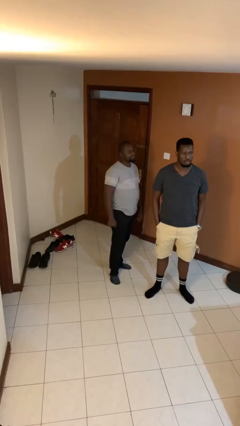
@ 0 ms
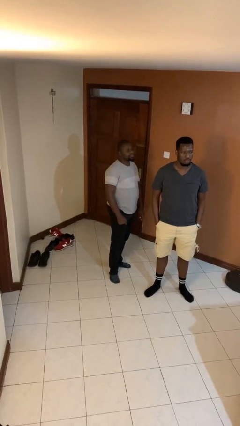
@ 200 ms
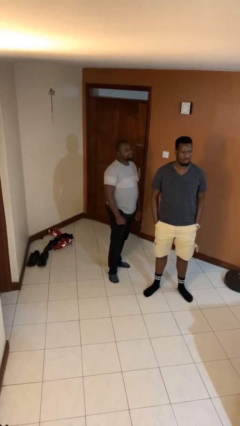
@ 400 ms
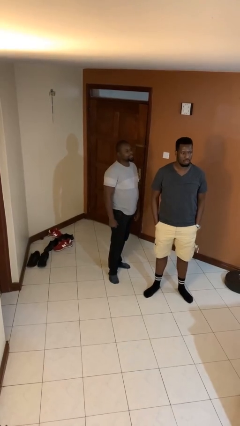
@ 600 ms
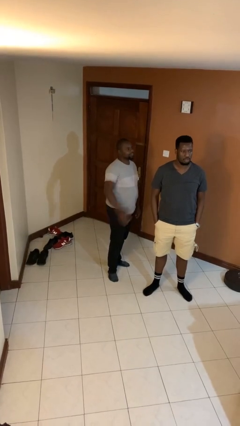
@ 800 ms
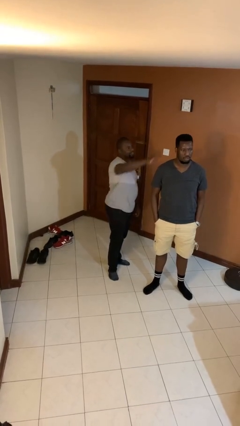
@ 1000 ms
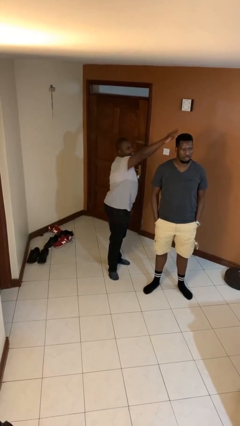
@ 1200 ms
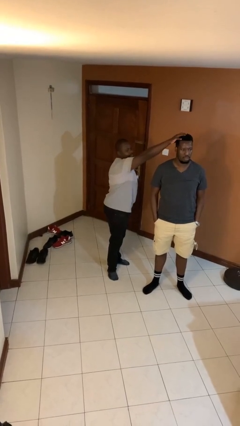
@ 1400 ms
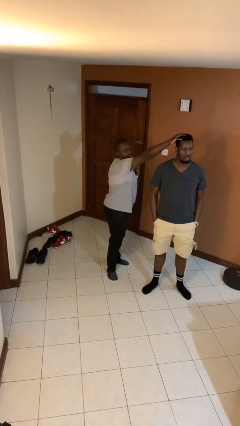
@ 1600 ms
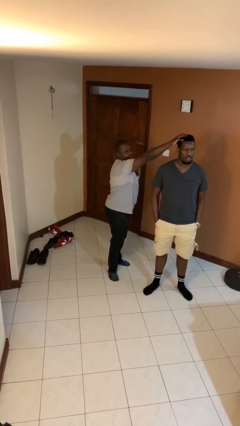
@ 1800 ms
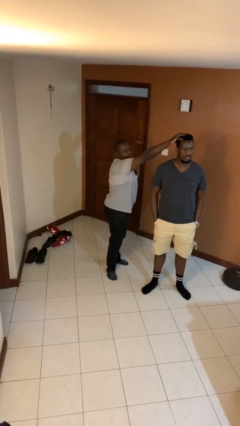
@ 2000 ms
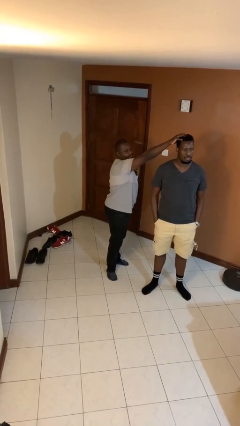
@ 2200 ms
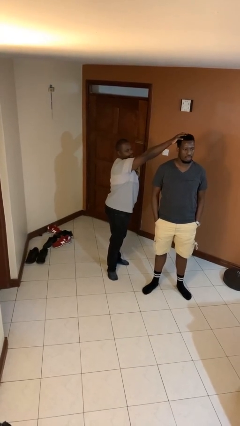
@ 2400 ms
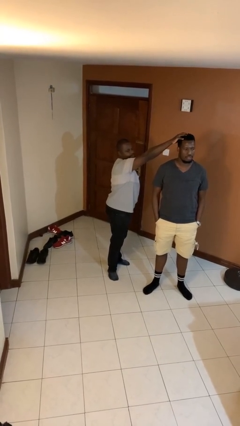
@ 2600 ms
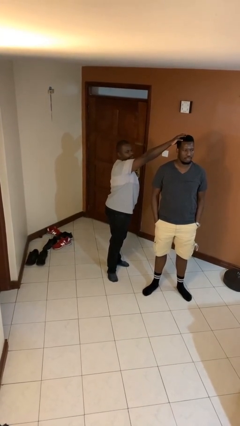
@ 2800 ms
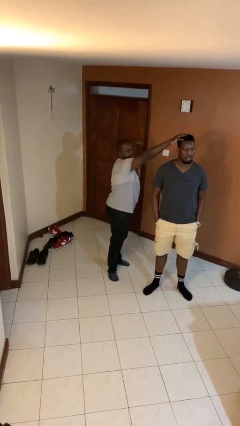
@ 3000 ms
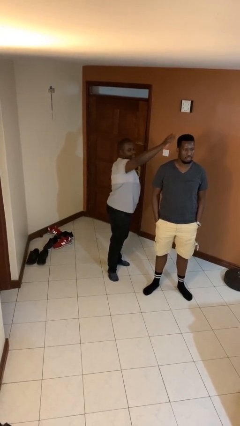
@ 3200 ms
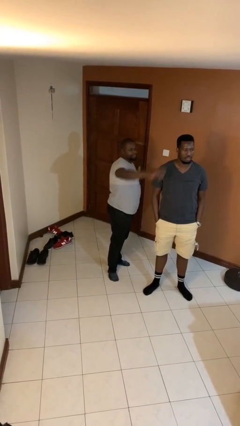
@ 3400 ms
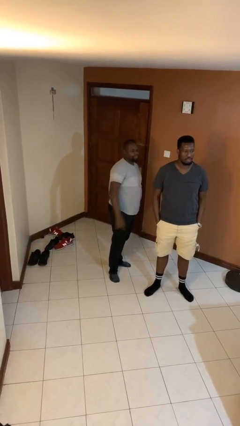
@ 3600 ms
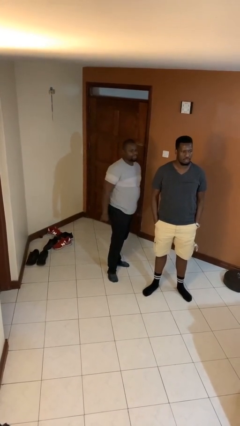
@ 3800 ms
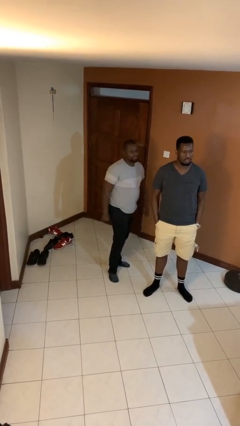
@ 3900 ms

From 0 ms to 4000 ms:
person grabs person by hair

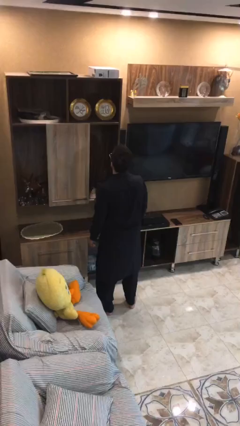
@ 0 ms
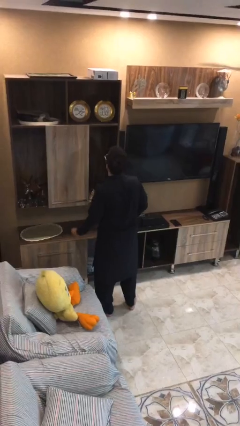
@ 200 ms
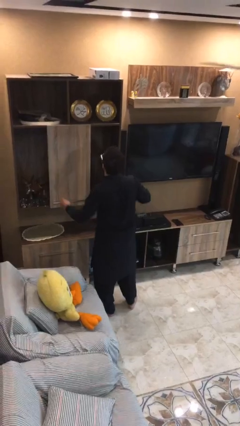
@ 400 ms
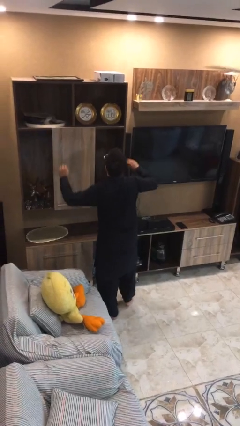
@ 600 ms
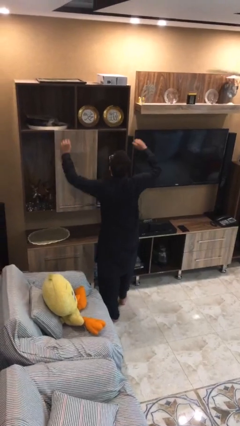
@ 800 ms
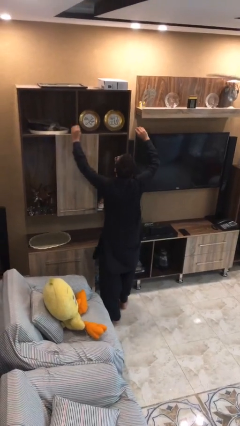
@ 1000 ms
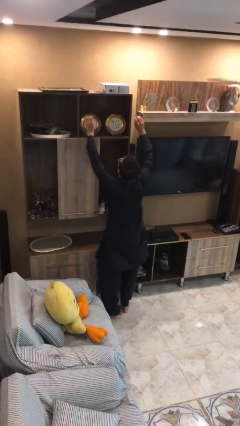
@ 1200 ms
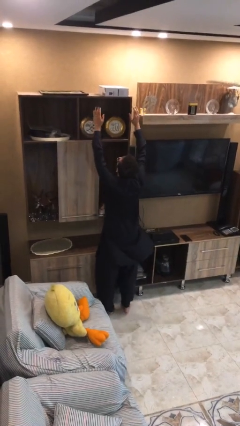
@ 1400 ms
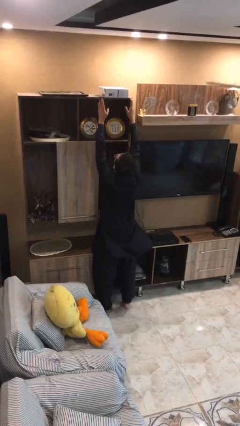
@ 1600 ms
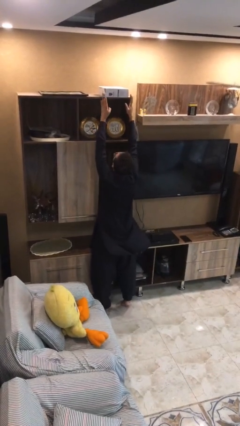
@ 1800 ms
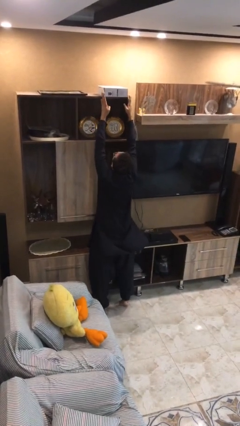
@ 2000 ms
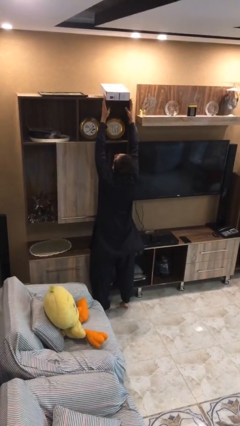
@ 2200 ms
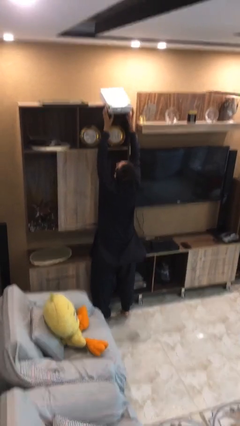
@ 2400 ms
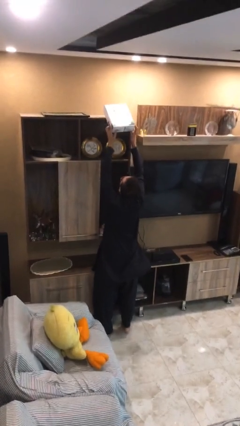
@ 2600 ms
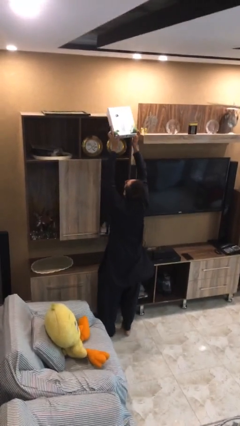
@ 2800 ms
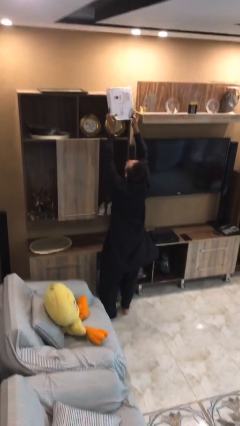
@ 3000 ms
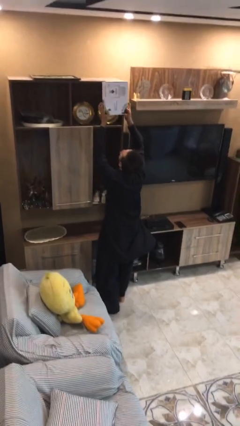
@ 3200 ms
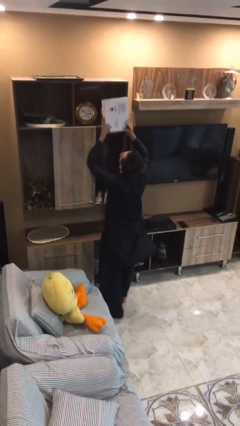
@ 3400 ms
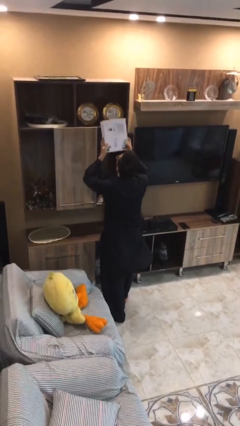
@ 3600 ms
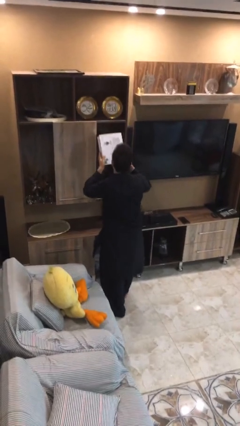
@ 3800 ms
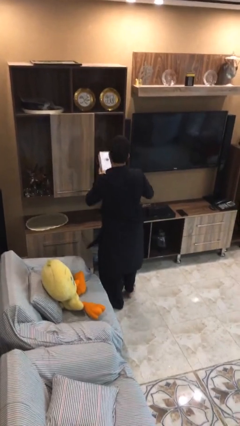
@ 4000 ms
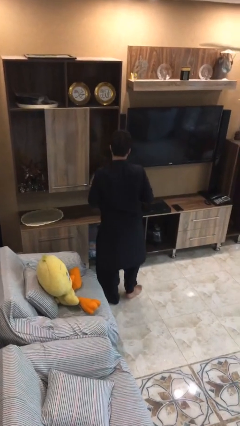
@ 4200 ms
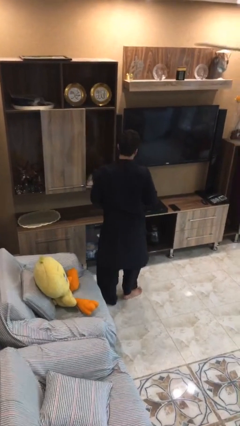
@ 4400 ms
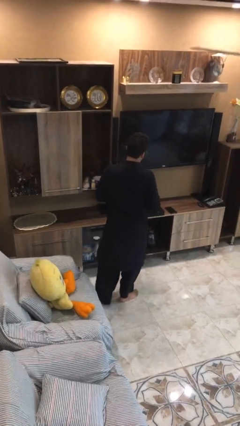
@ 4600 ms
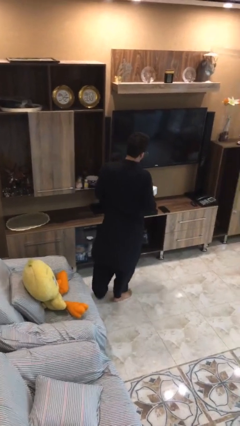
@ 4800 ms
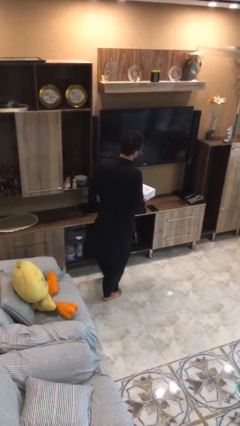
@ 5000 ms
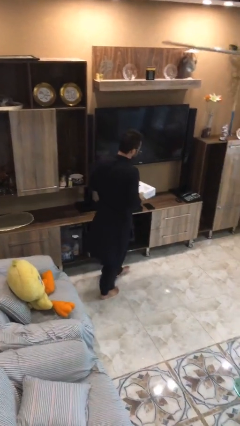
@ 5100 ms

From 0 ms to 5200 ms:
person picks up object from shelf

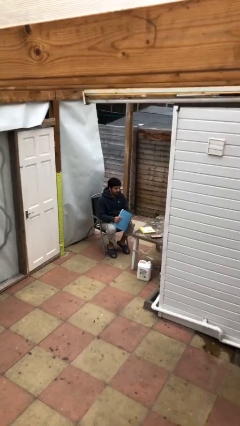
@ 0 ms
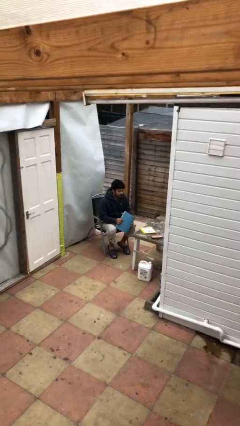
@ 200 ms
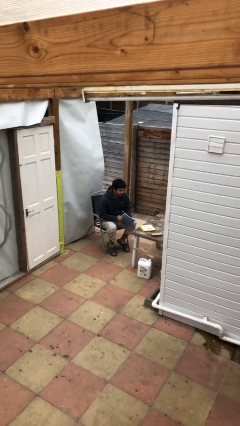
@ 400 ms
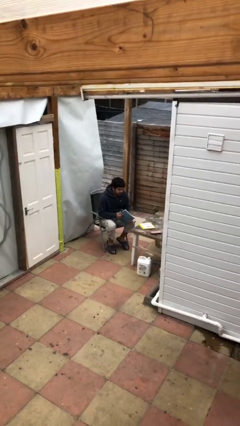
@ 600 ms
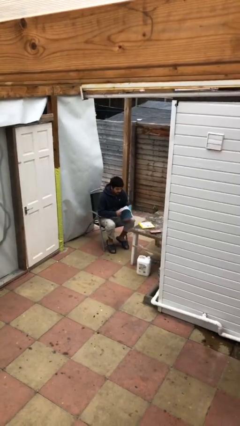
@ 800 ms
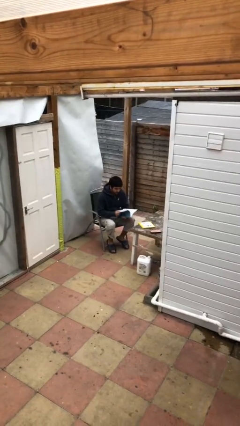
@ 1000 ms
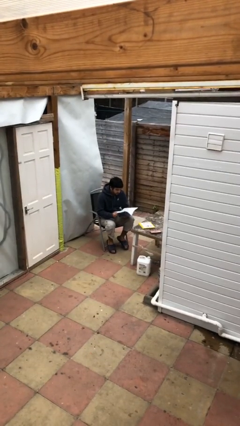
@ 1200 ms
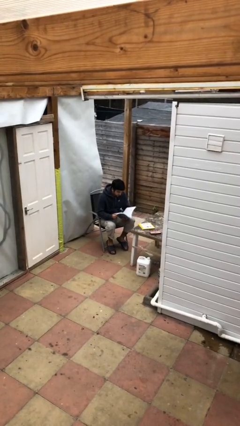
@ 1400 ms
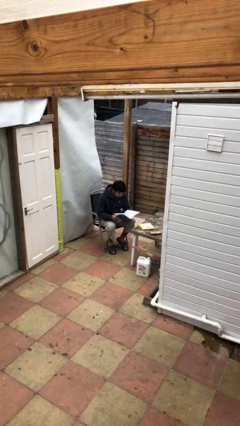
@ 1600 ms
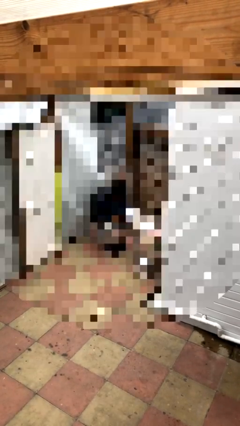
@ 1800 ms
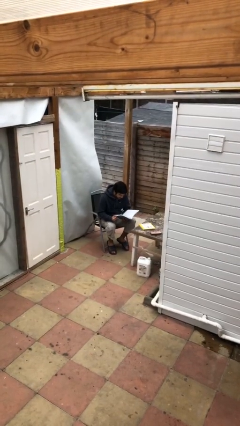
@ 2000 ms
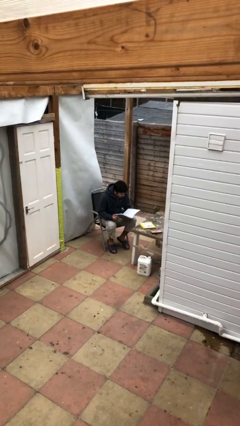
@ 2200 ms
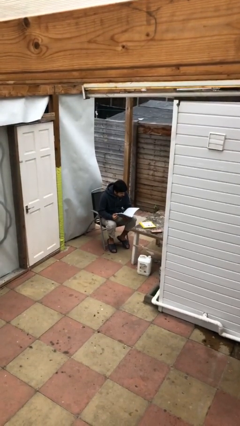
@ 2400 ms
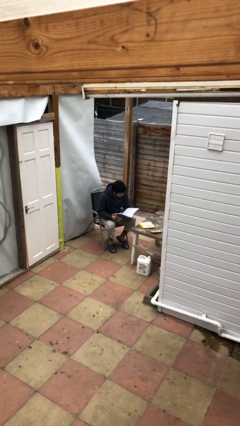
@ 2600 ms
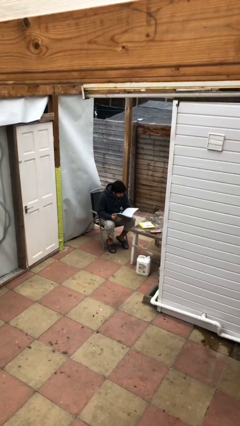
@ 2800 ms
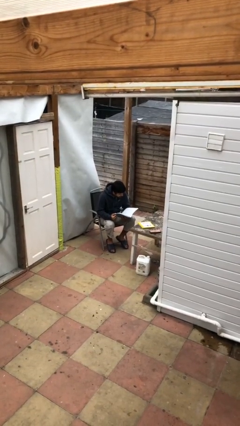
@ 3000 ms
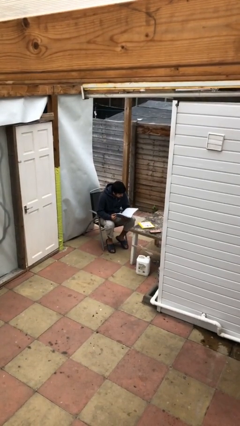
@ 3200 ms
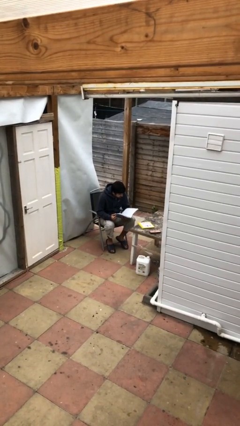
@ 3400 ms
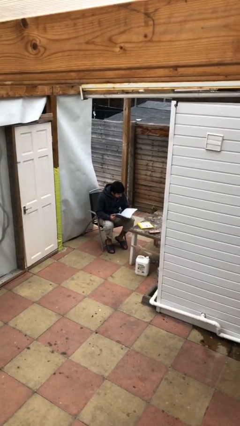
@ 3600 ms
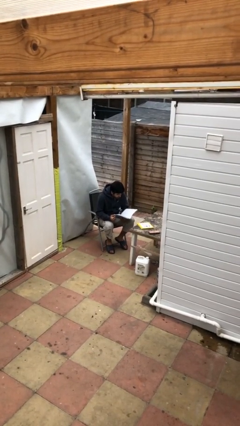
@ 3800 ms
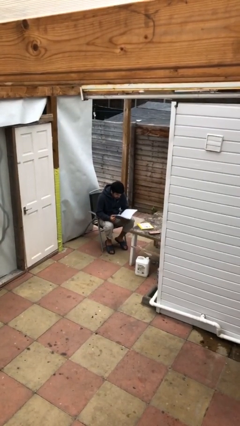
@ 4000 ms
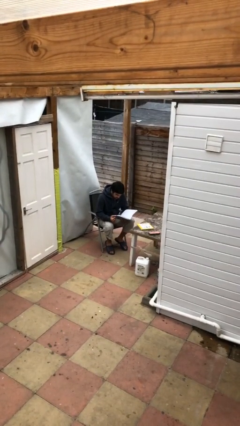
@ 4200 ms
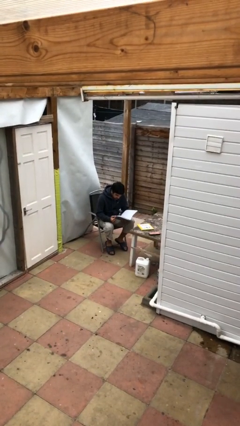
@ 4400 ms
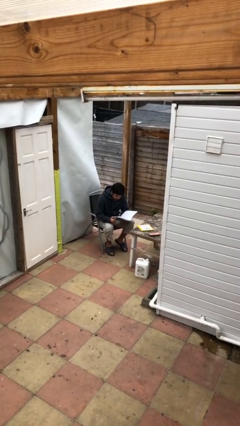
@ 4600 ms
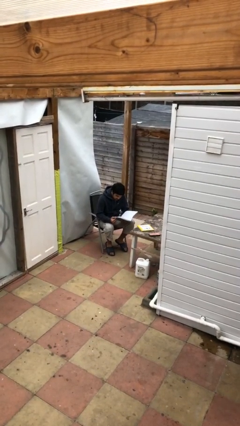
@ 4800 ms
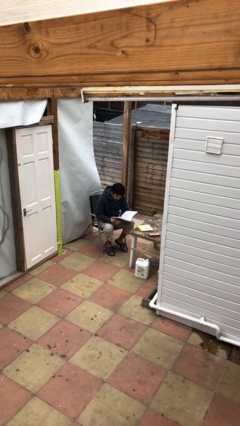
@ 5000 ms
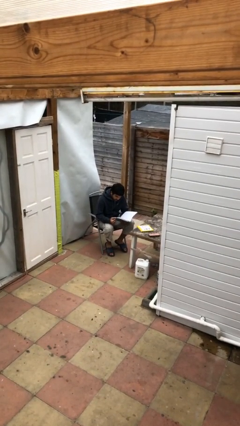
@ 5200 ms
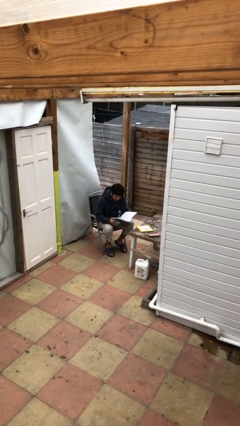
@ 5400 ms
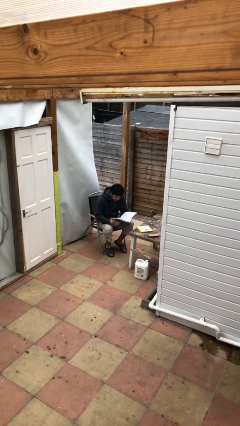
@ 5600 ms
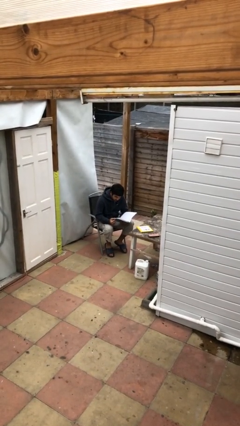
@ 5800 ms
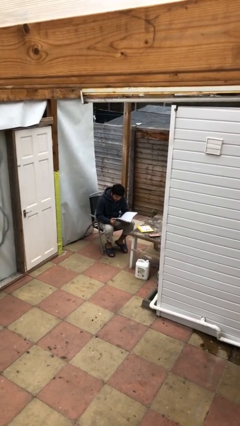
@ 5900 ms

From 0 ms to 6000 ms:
person reads document

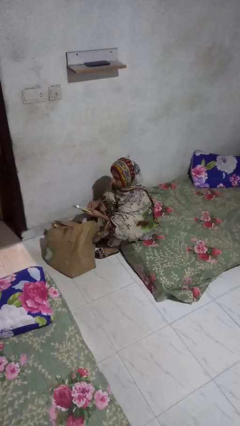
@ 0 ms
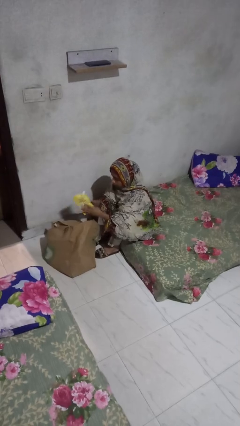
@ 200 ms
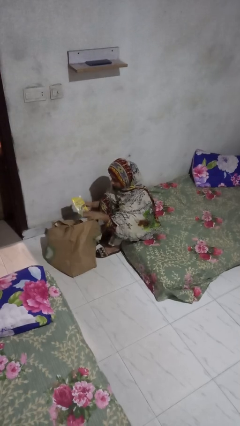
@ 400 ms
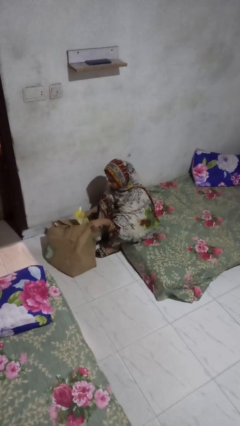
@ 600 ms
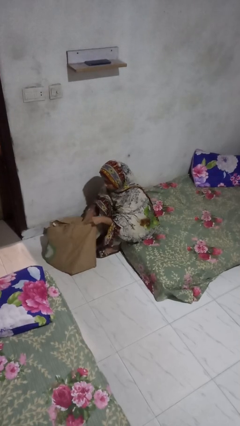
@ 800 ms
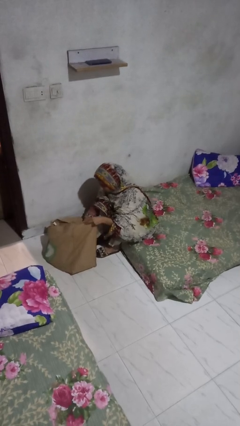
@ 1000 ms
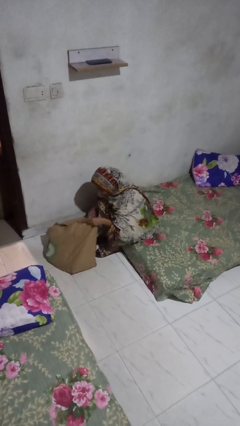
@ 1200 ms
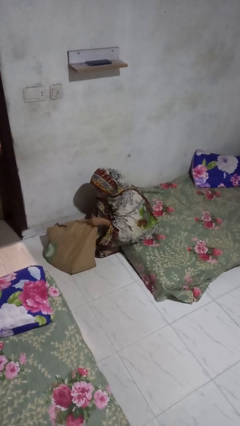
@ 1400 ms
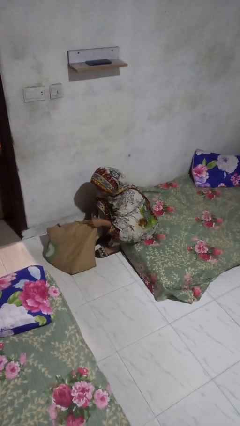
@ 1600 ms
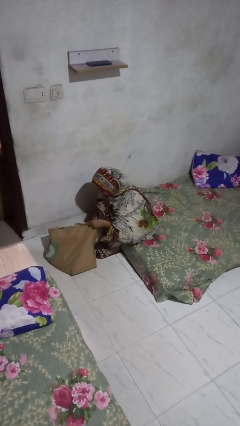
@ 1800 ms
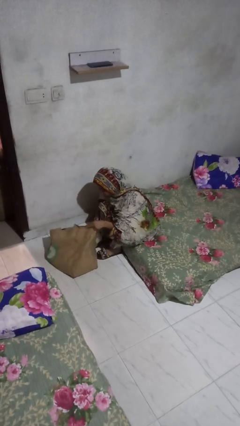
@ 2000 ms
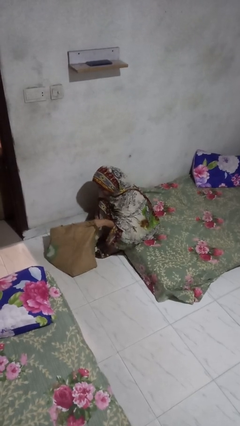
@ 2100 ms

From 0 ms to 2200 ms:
person puts object into bag
